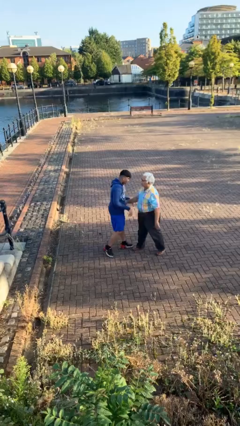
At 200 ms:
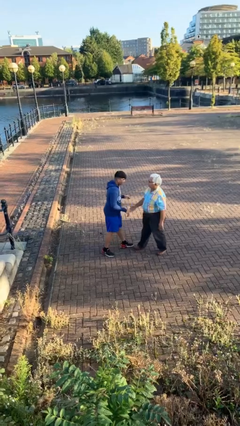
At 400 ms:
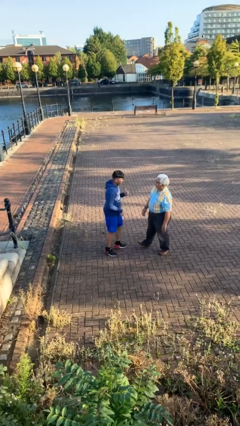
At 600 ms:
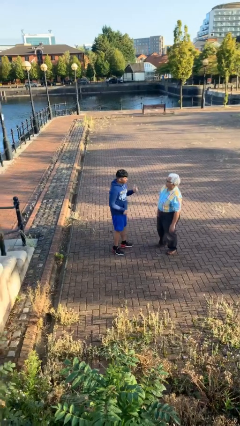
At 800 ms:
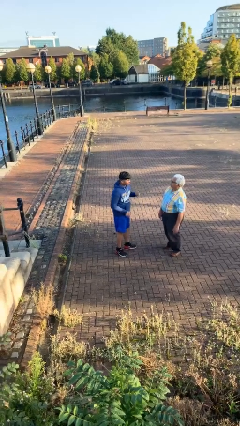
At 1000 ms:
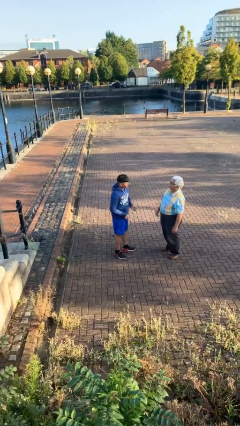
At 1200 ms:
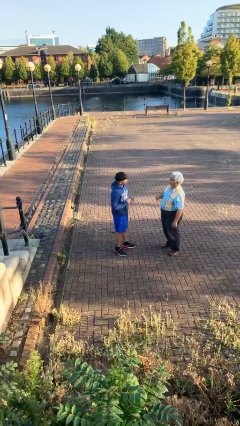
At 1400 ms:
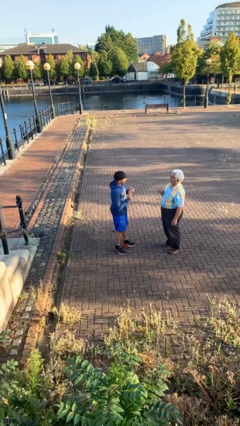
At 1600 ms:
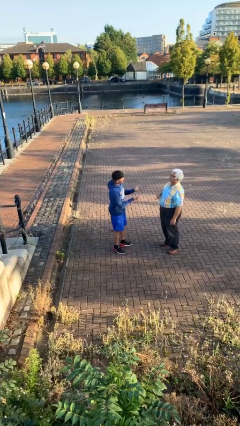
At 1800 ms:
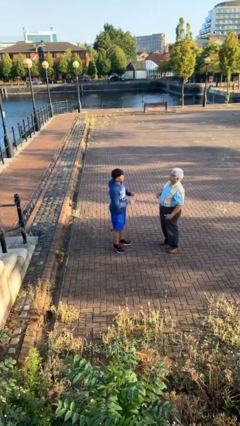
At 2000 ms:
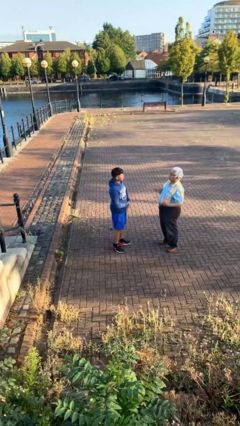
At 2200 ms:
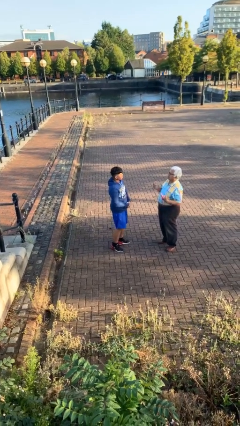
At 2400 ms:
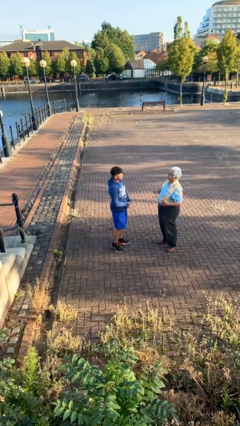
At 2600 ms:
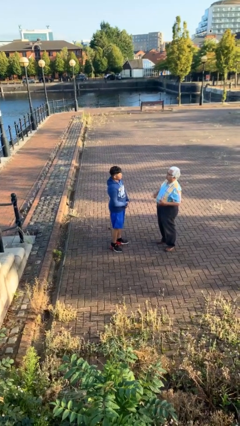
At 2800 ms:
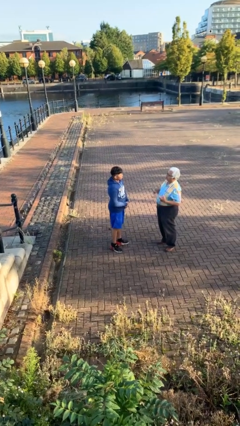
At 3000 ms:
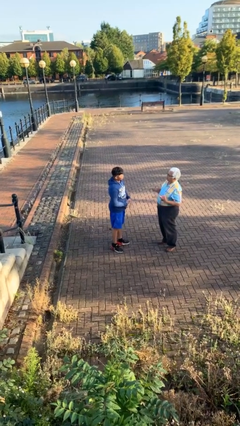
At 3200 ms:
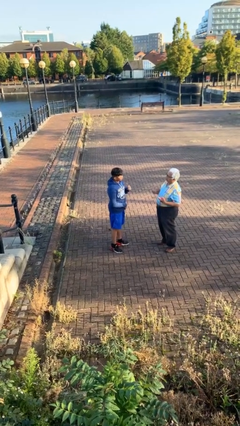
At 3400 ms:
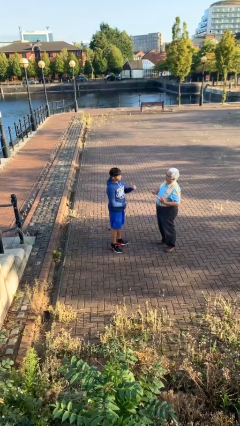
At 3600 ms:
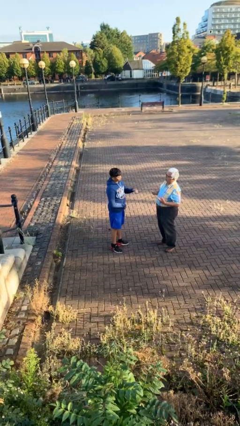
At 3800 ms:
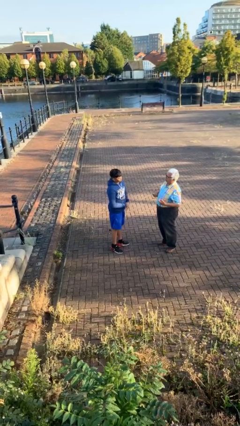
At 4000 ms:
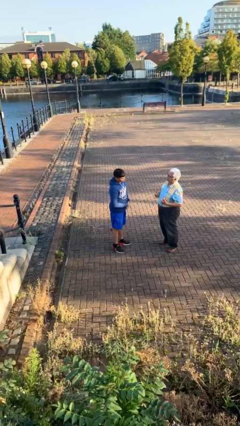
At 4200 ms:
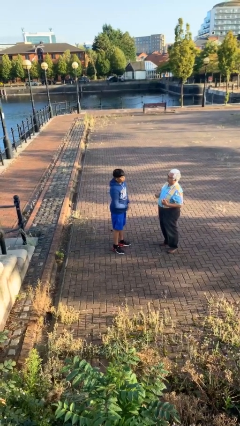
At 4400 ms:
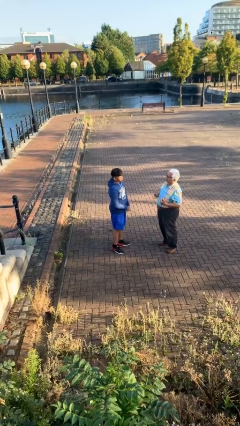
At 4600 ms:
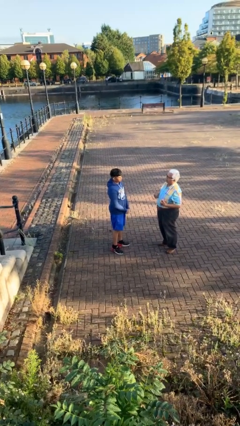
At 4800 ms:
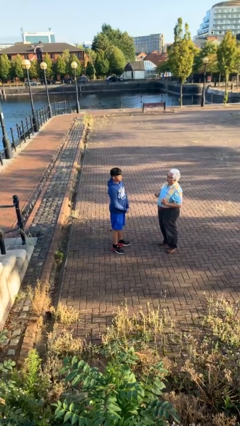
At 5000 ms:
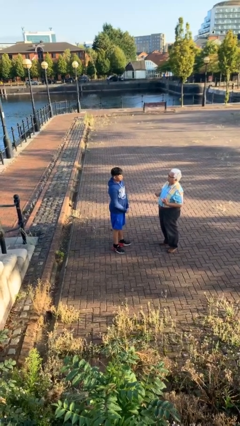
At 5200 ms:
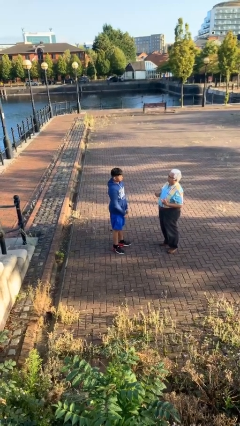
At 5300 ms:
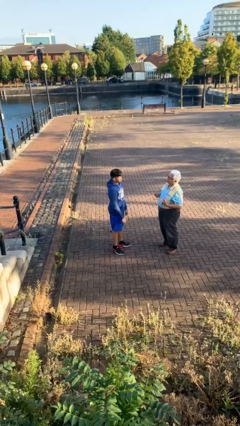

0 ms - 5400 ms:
person talks to person

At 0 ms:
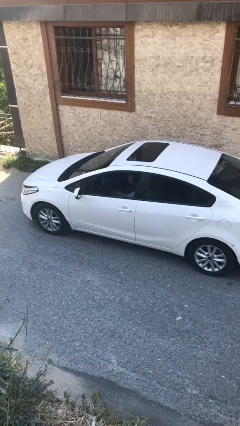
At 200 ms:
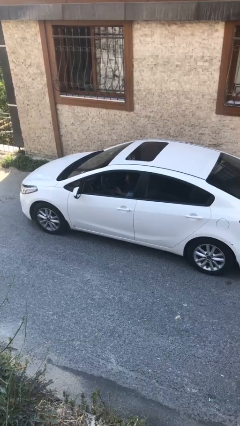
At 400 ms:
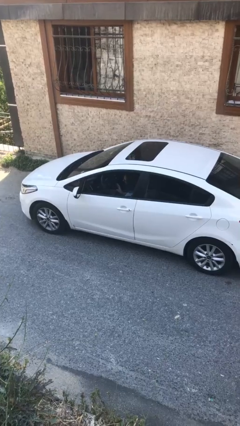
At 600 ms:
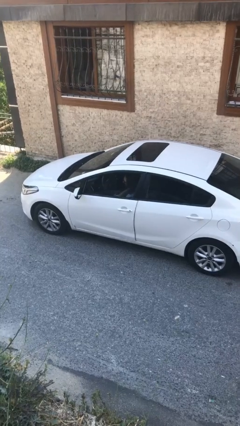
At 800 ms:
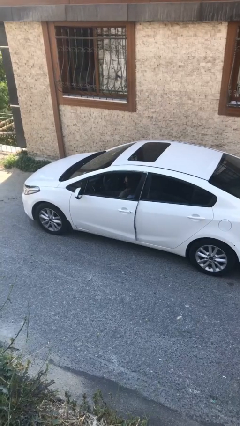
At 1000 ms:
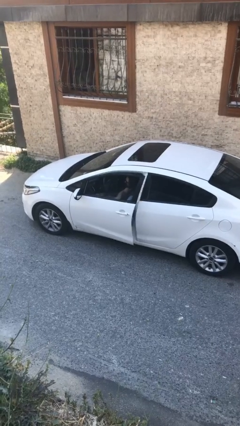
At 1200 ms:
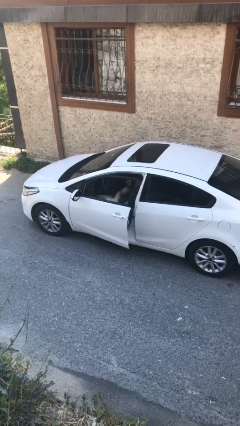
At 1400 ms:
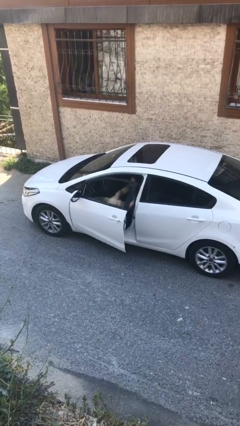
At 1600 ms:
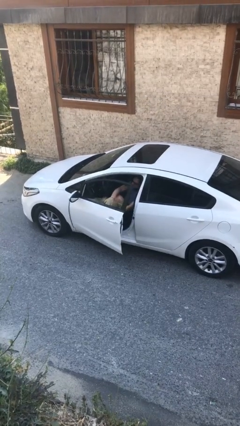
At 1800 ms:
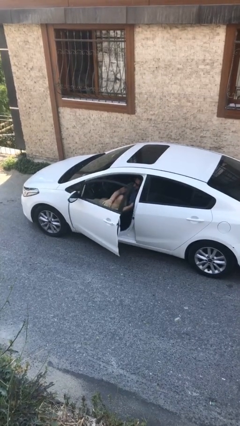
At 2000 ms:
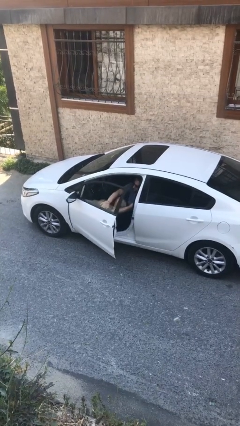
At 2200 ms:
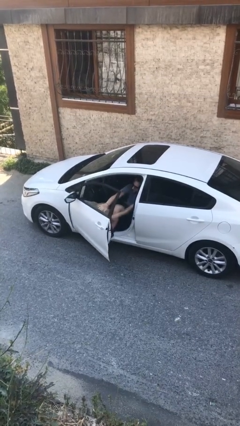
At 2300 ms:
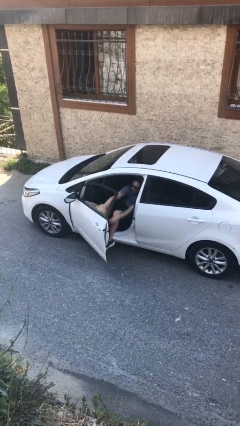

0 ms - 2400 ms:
person opens car door

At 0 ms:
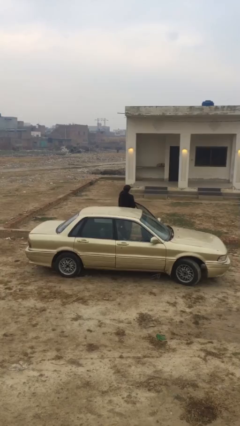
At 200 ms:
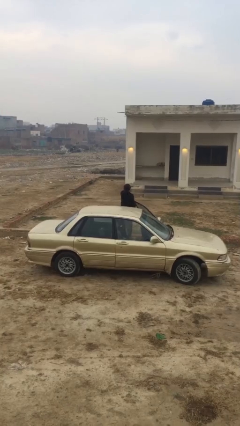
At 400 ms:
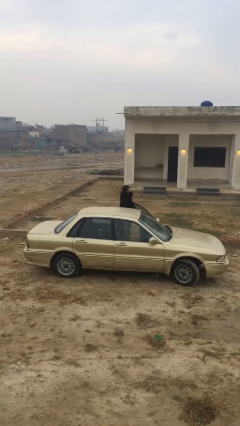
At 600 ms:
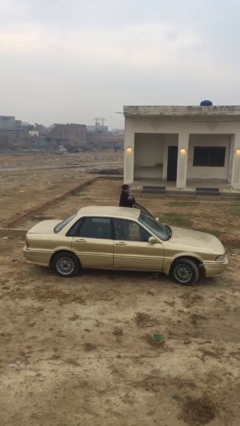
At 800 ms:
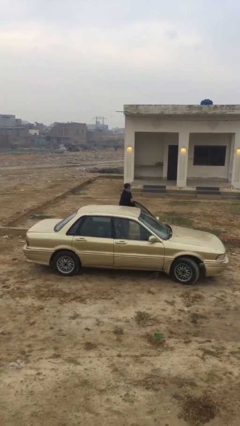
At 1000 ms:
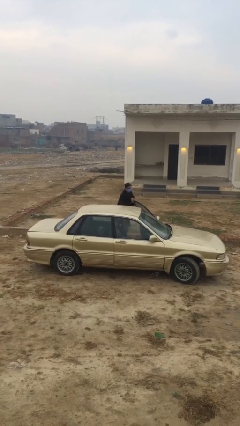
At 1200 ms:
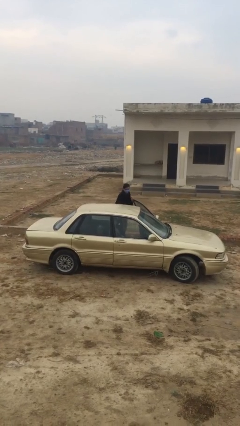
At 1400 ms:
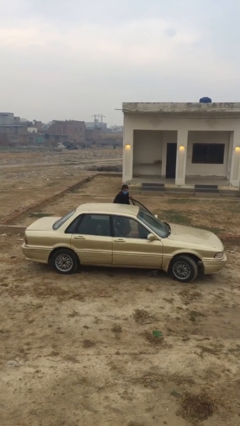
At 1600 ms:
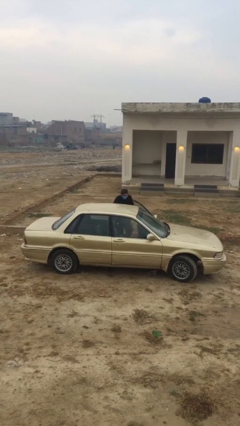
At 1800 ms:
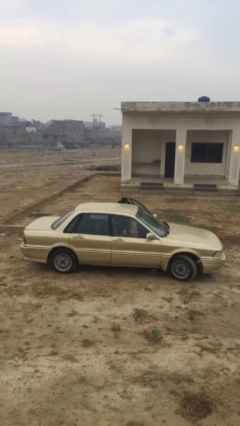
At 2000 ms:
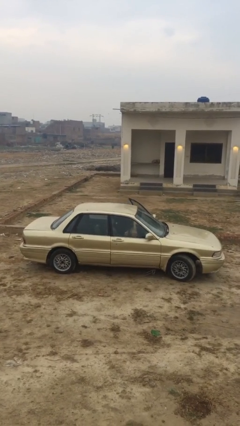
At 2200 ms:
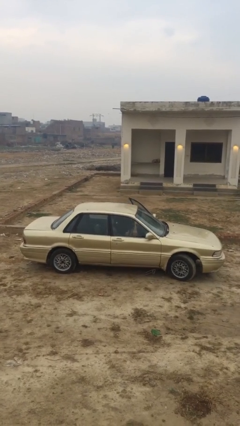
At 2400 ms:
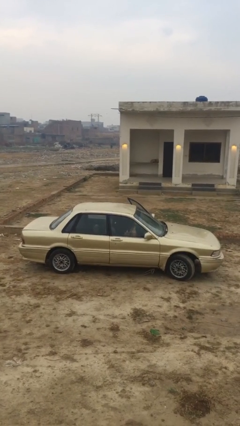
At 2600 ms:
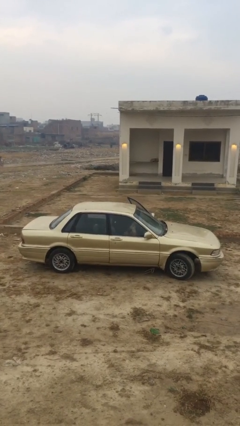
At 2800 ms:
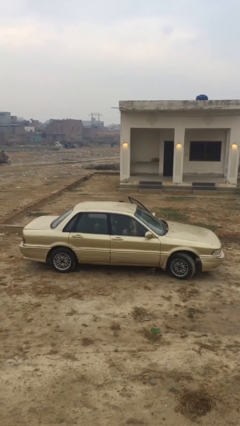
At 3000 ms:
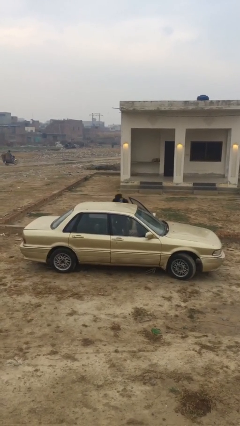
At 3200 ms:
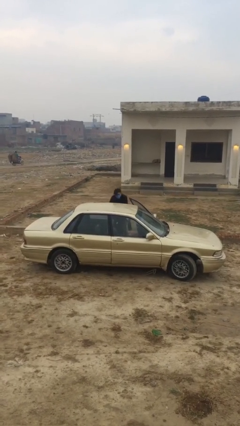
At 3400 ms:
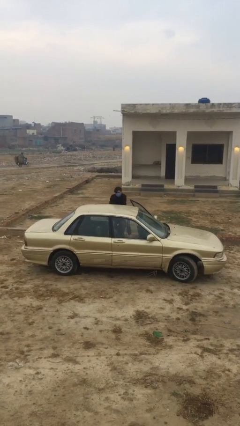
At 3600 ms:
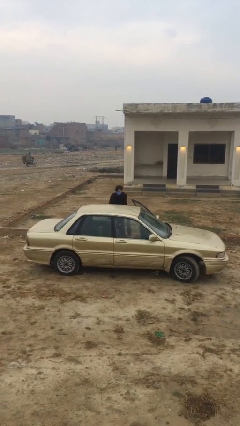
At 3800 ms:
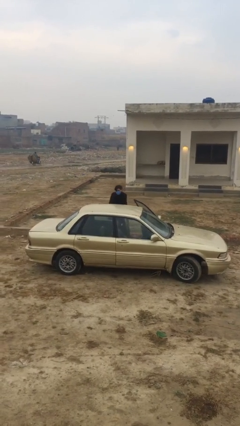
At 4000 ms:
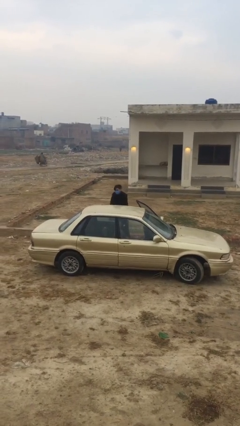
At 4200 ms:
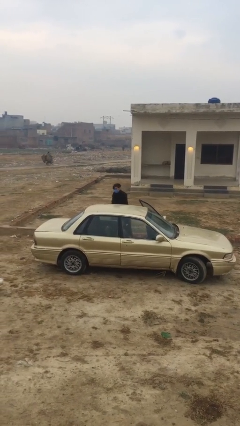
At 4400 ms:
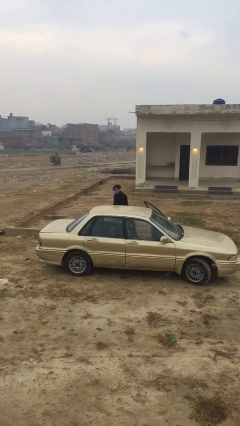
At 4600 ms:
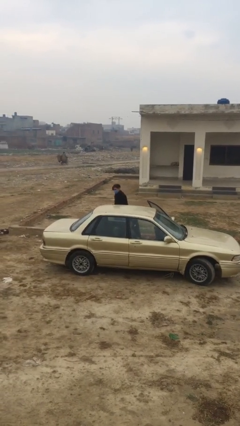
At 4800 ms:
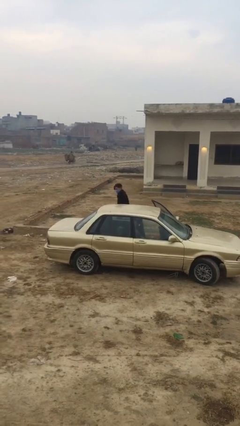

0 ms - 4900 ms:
person unloads car

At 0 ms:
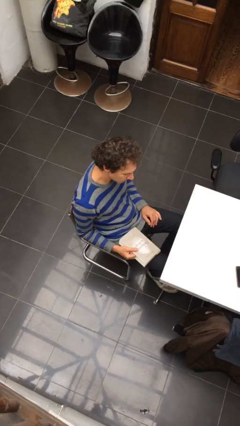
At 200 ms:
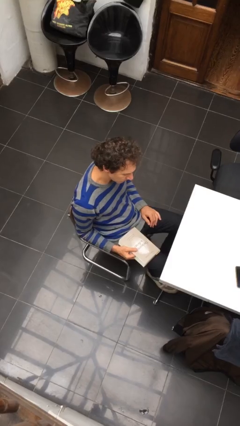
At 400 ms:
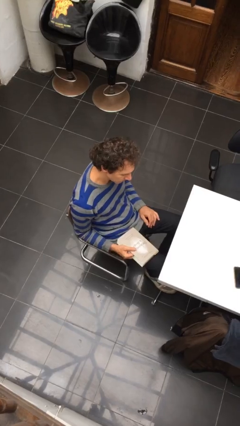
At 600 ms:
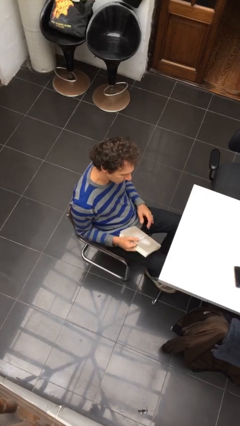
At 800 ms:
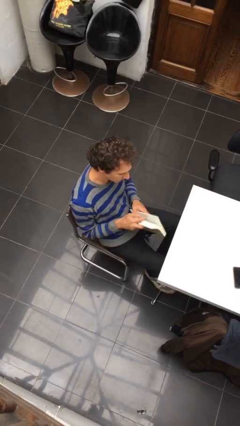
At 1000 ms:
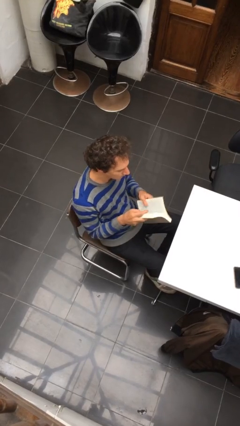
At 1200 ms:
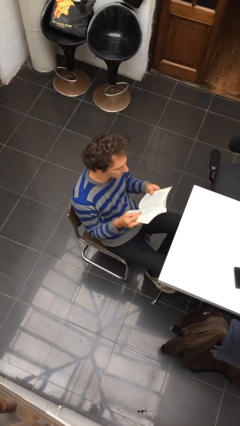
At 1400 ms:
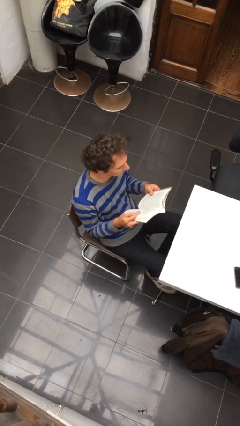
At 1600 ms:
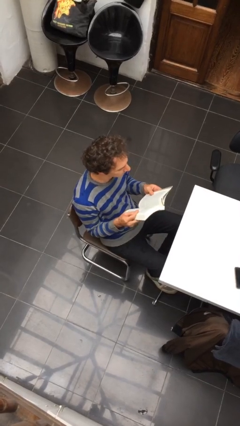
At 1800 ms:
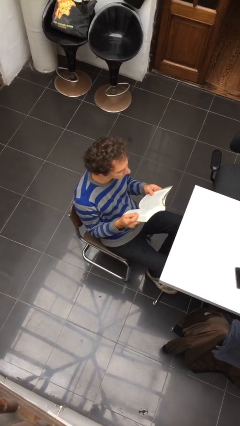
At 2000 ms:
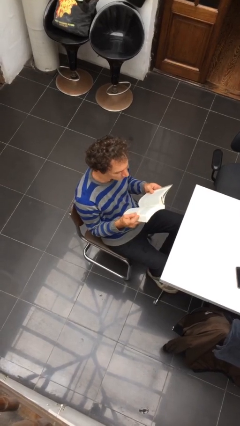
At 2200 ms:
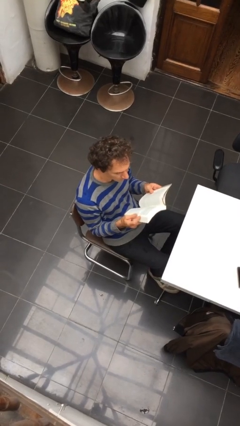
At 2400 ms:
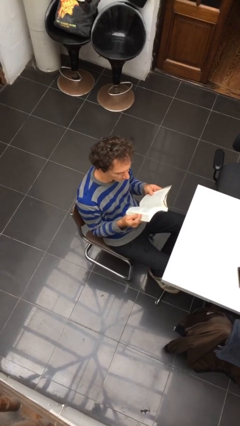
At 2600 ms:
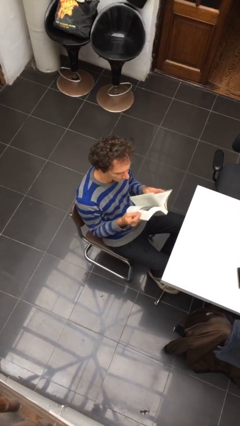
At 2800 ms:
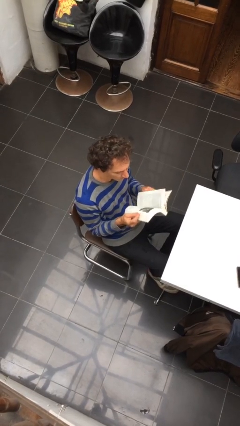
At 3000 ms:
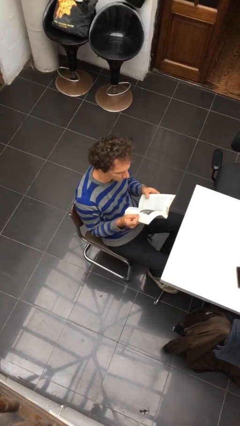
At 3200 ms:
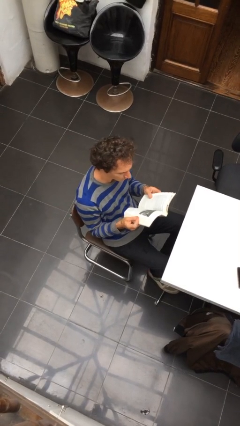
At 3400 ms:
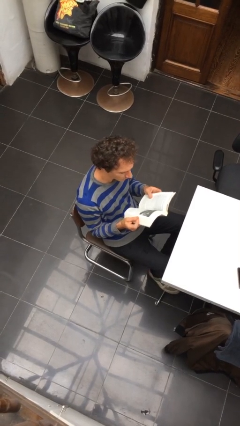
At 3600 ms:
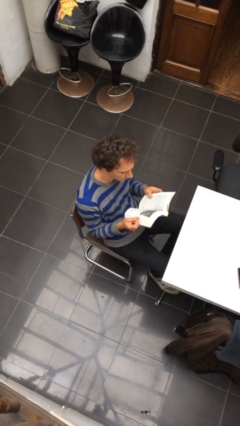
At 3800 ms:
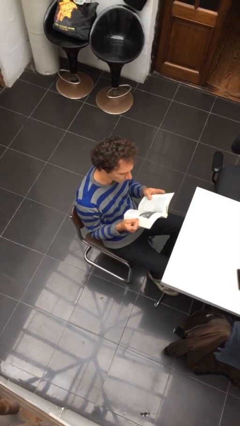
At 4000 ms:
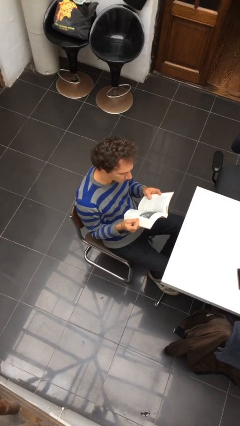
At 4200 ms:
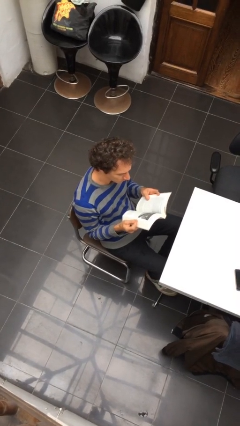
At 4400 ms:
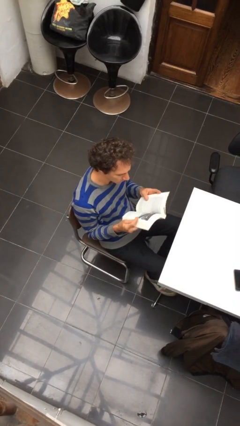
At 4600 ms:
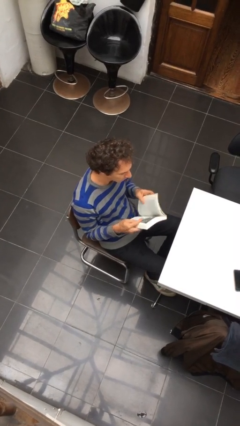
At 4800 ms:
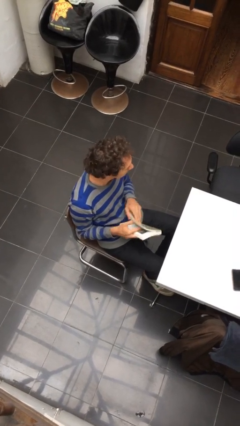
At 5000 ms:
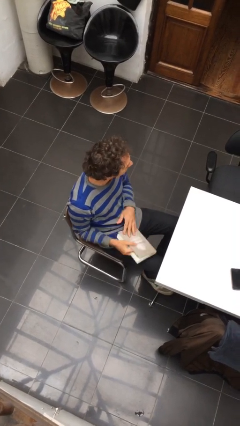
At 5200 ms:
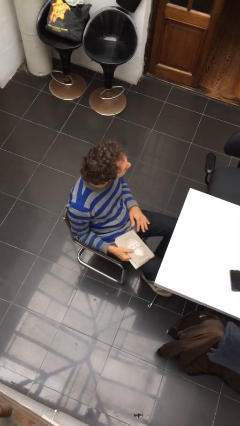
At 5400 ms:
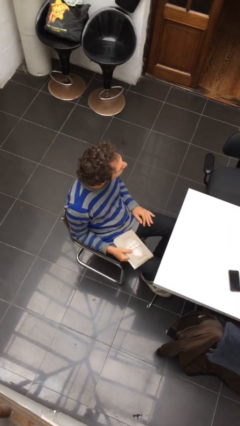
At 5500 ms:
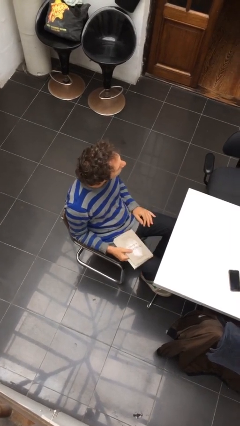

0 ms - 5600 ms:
person reads document
